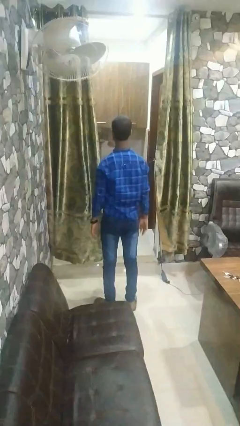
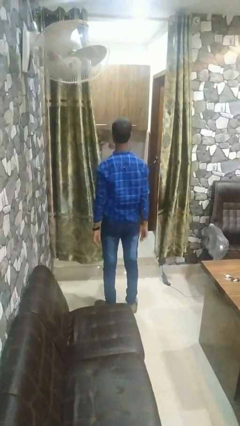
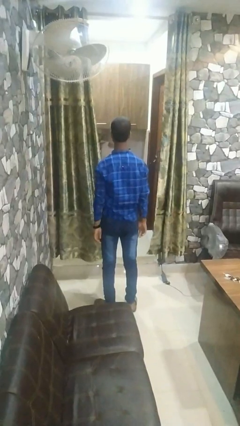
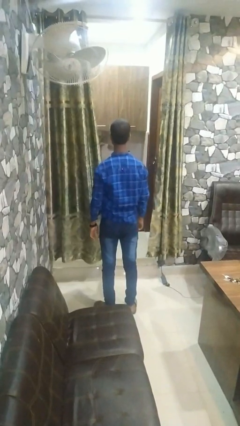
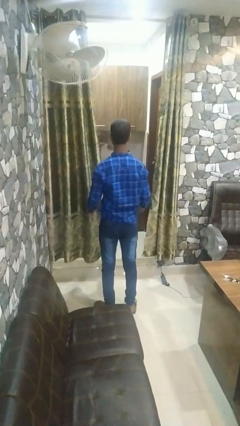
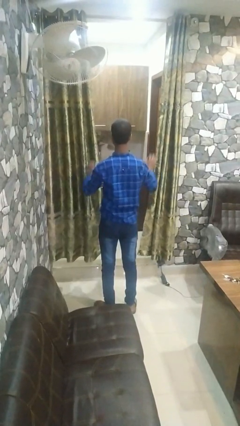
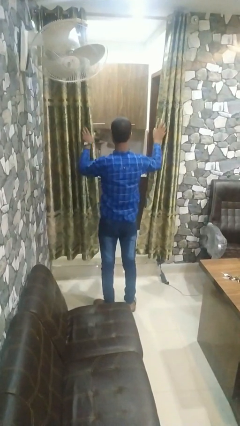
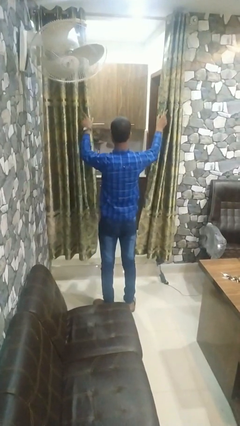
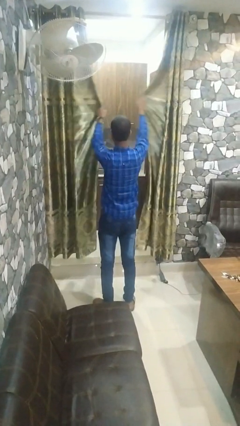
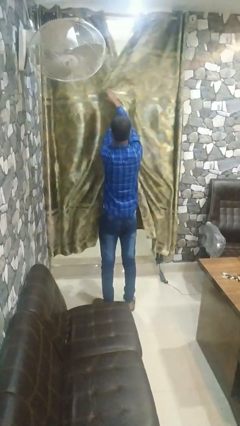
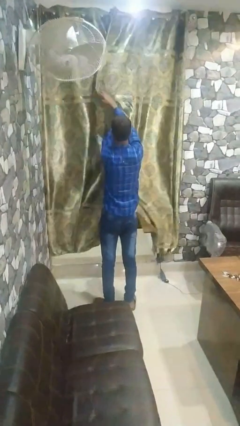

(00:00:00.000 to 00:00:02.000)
person closes curtains

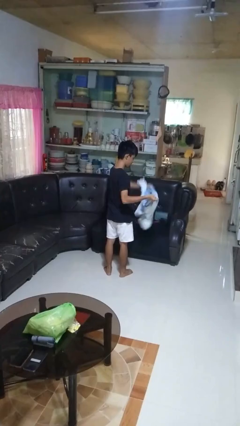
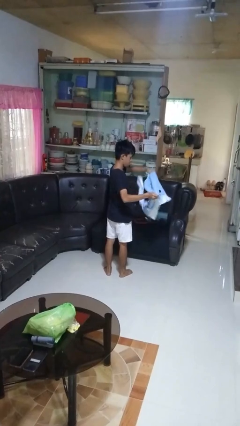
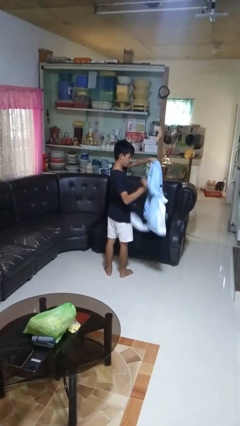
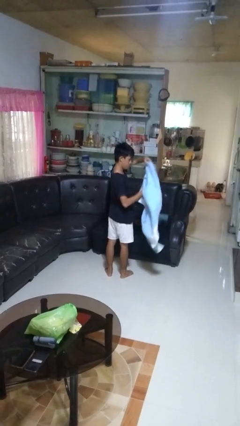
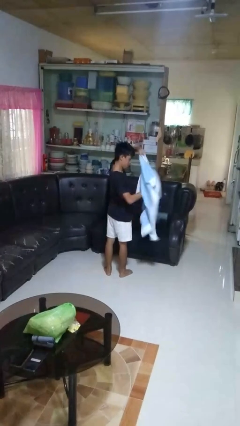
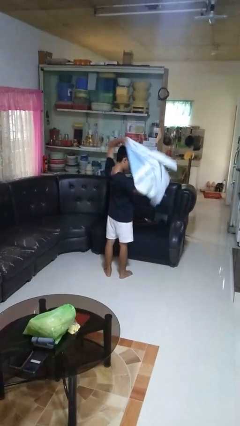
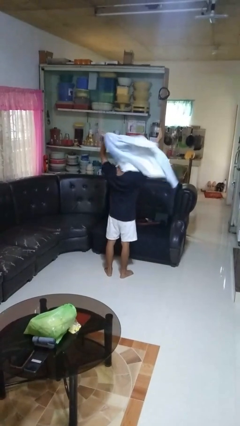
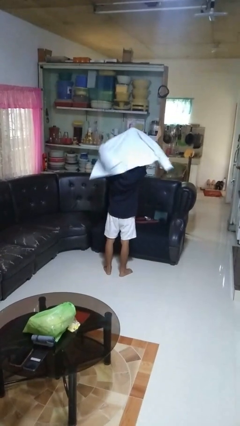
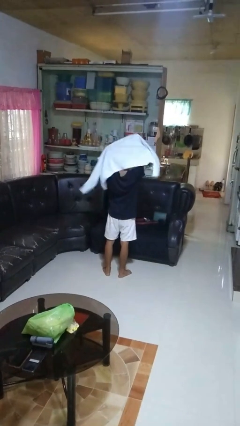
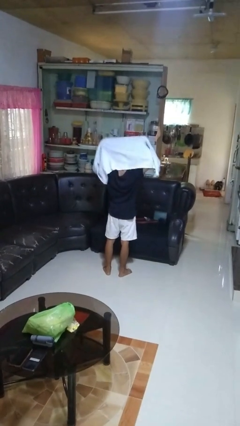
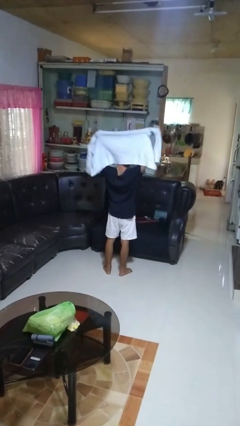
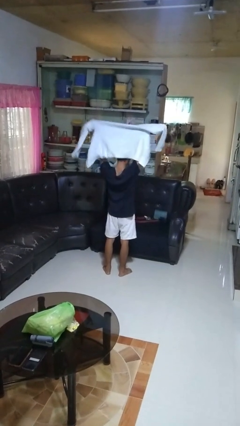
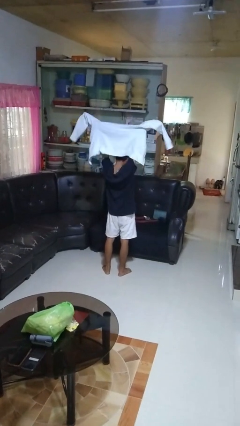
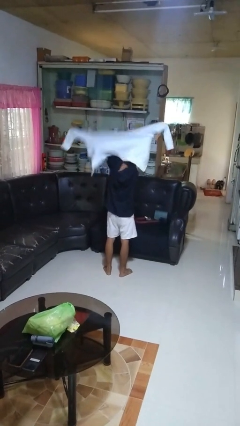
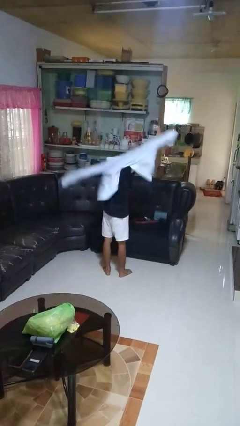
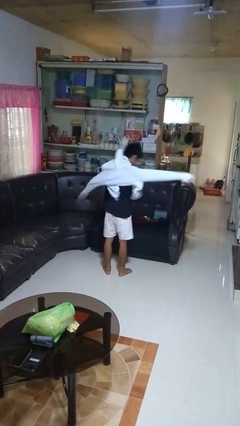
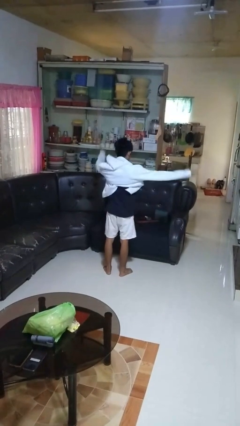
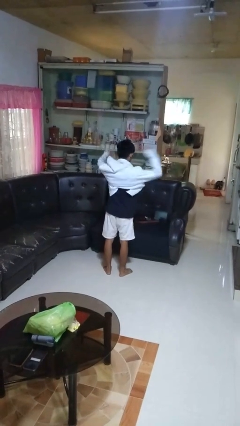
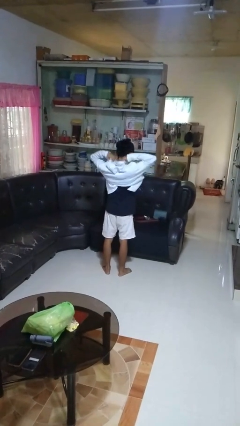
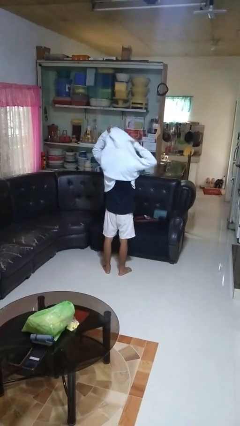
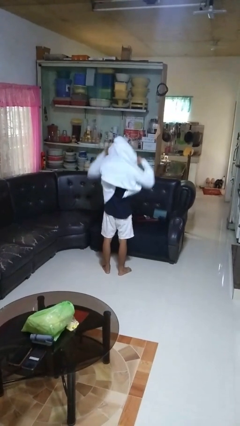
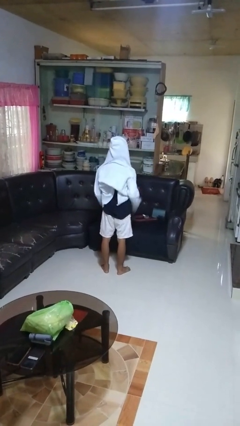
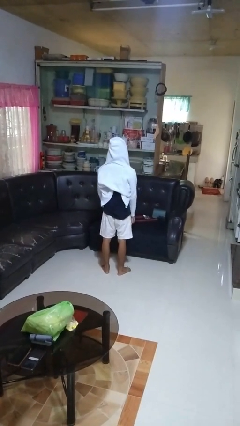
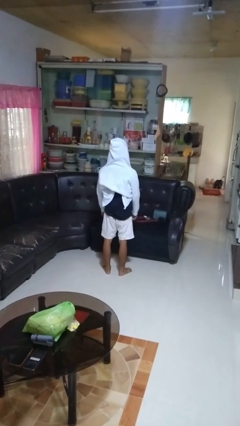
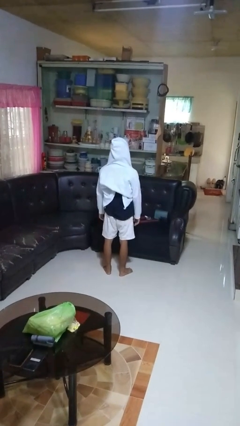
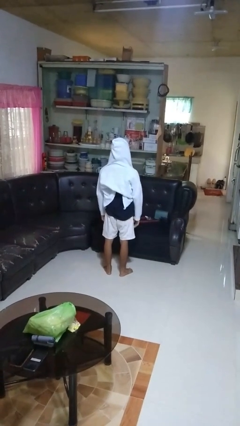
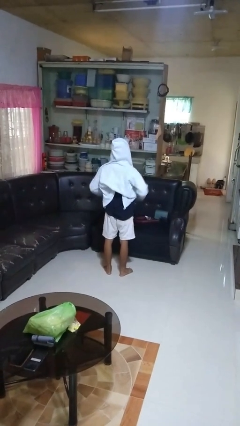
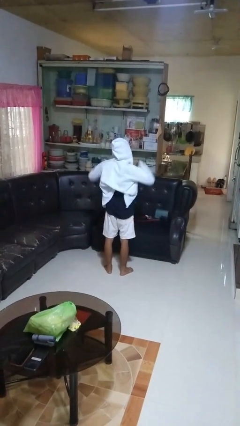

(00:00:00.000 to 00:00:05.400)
person puts on hoodie

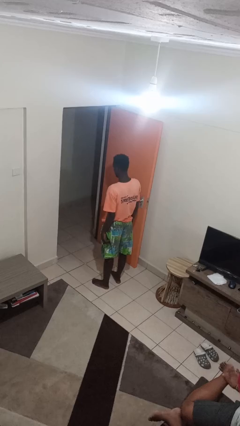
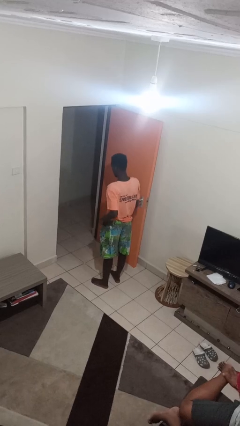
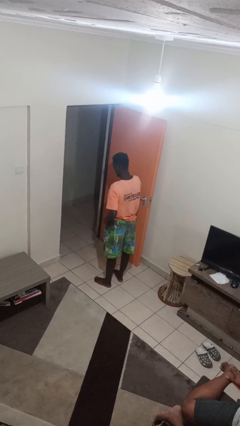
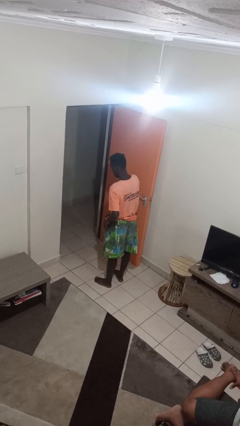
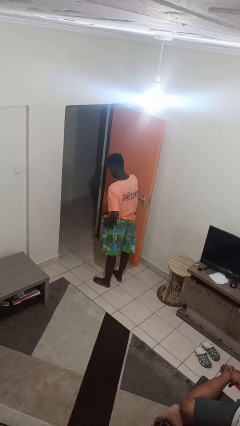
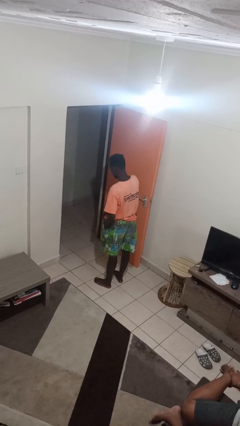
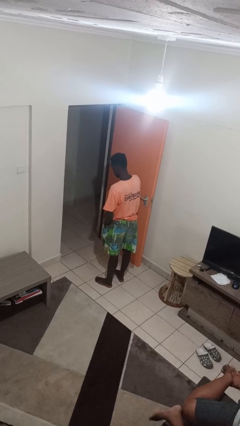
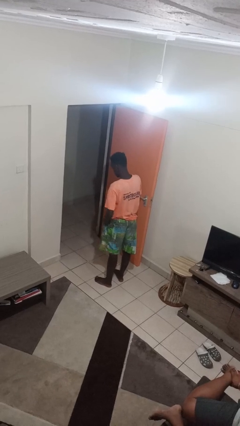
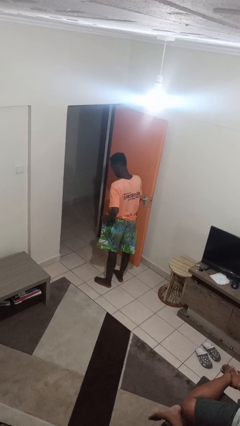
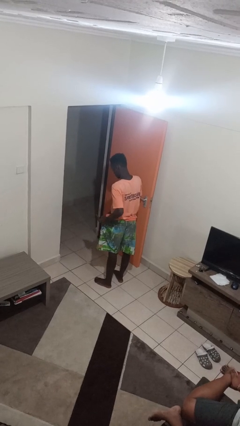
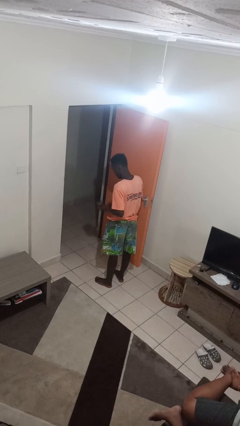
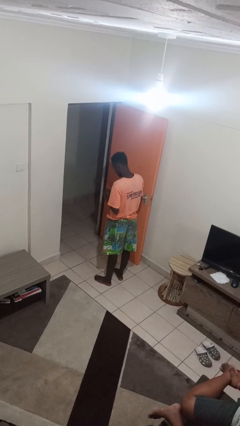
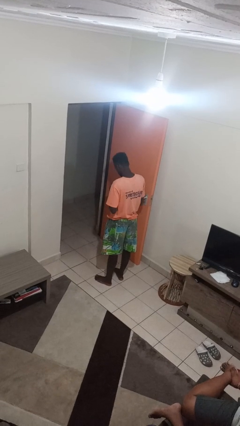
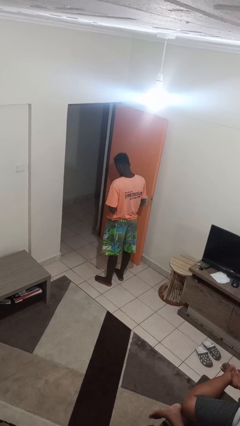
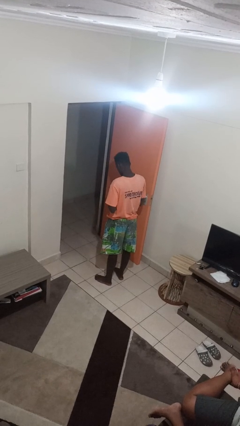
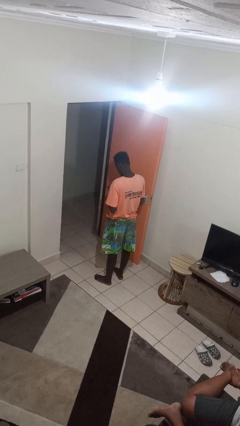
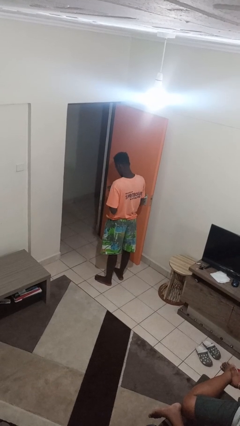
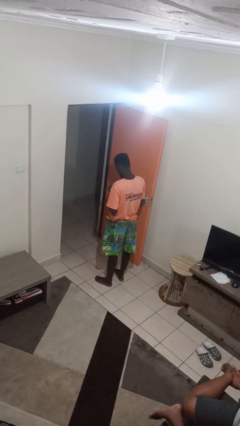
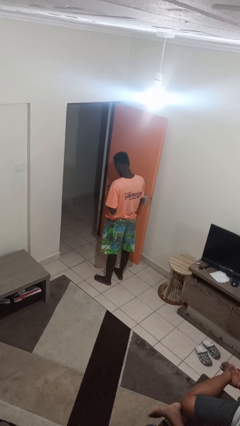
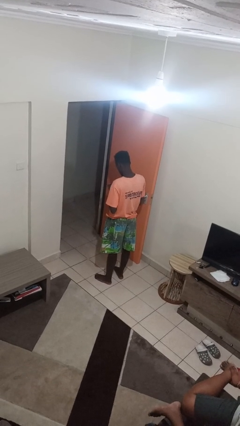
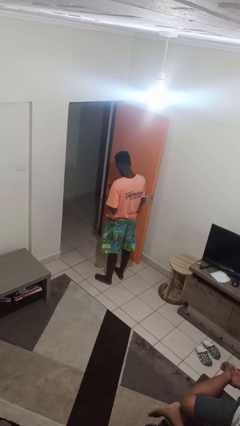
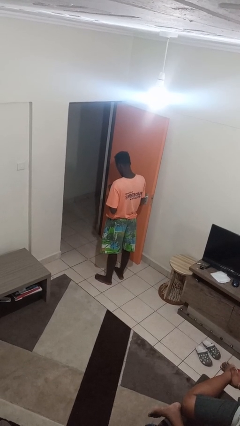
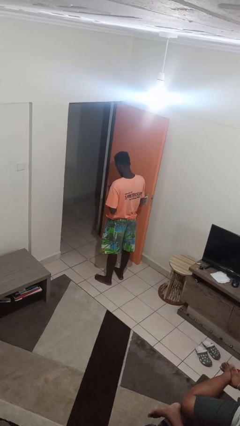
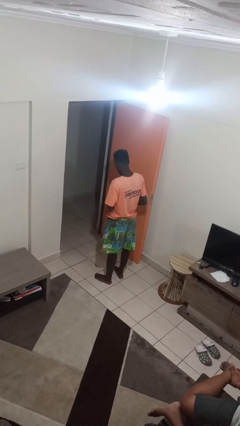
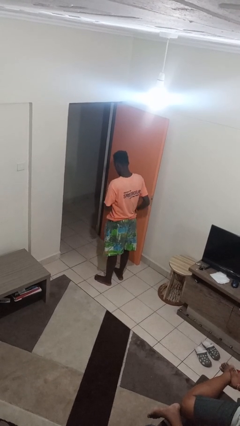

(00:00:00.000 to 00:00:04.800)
person takes phone from pocket

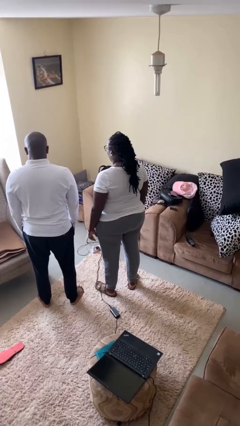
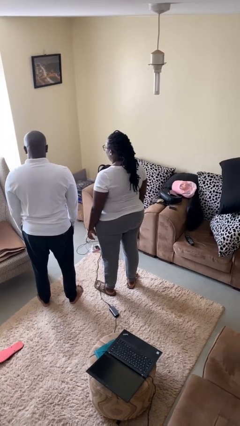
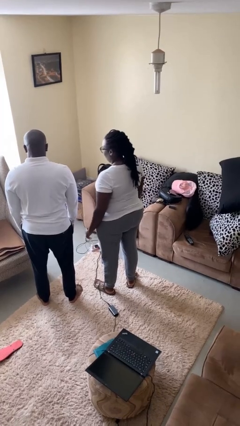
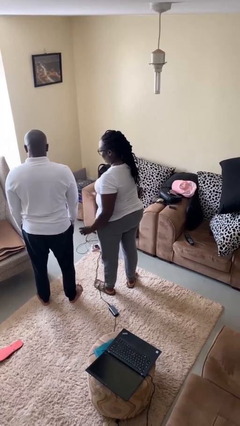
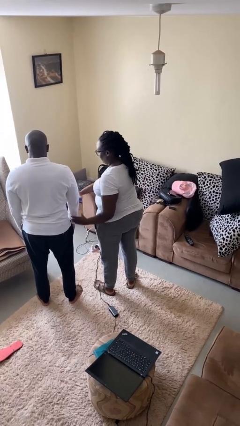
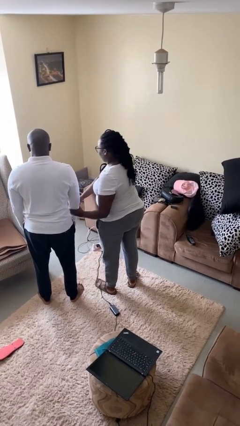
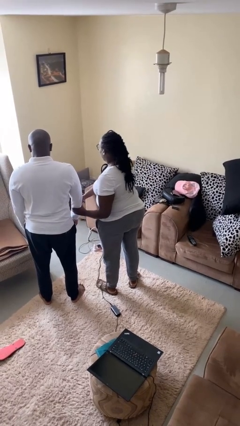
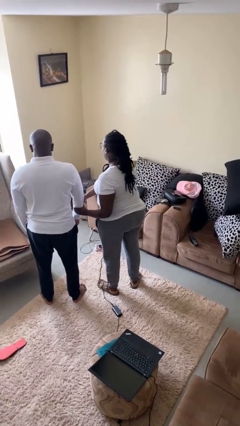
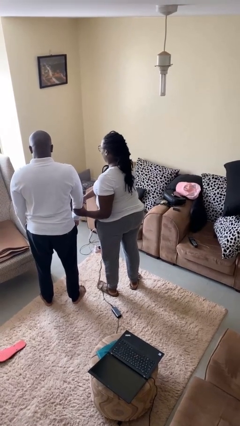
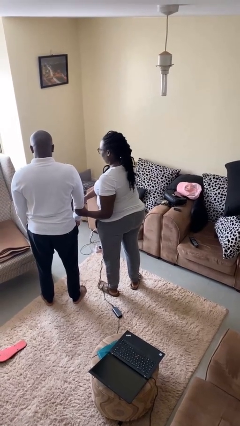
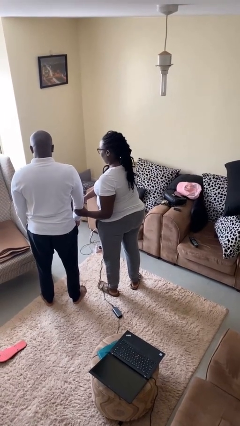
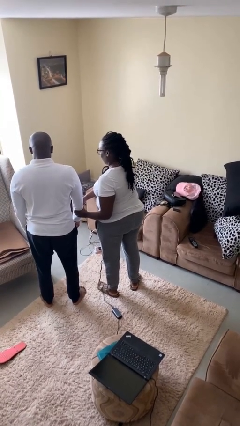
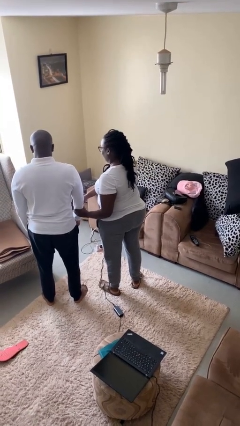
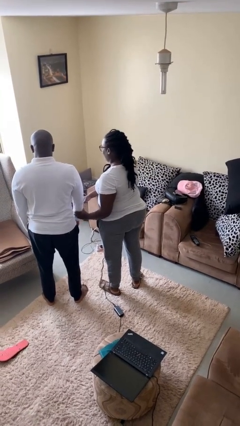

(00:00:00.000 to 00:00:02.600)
person grabs person by forearm

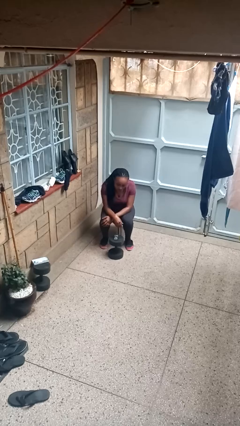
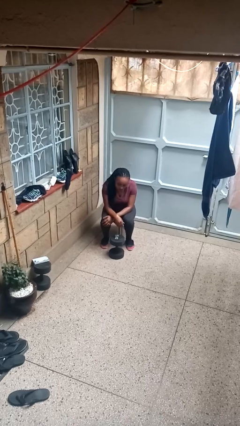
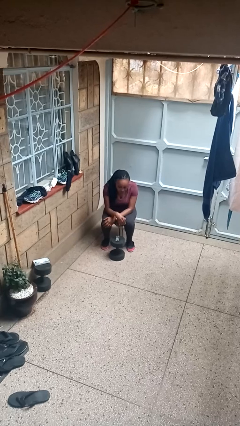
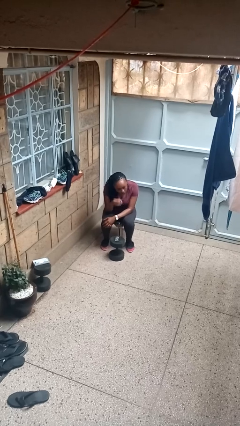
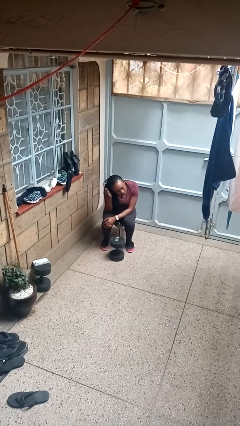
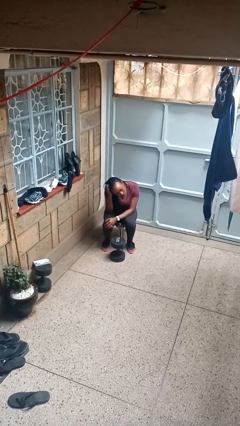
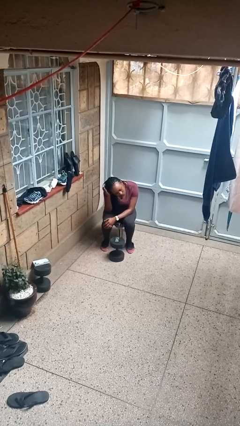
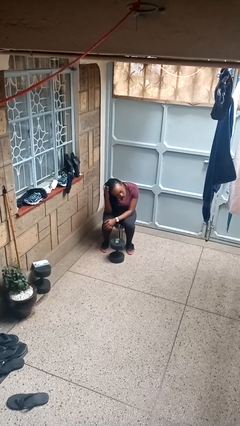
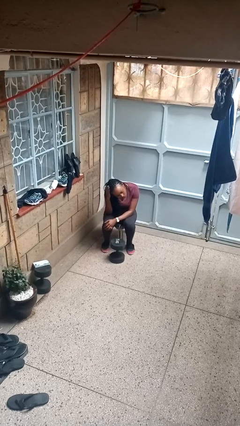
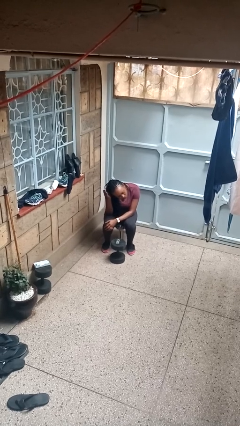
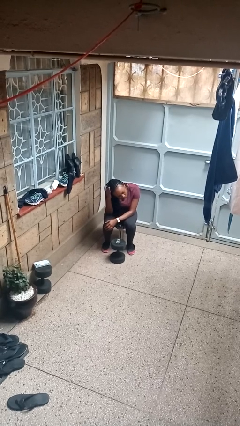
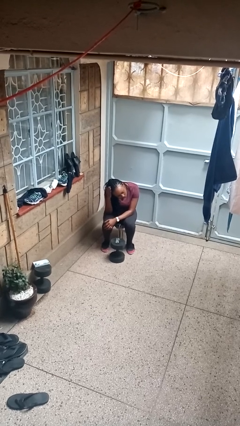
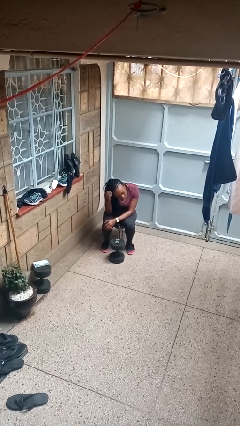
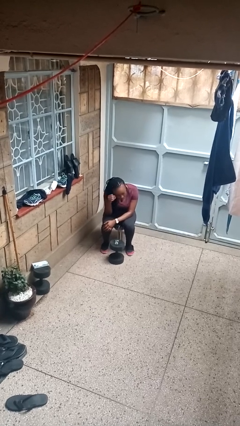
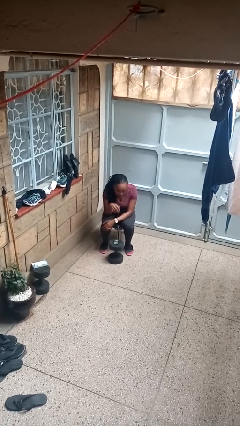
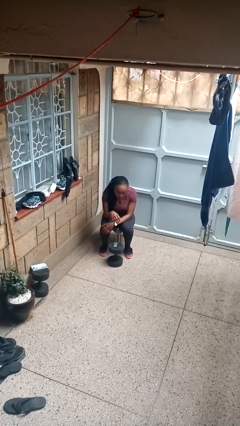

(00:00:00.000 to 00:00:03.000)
person pats head
